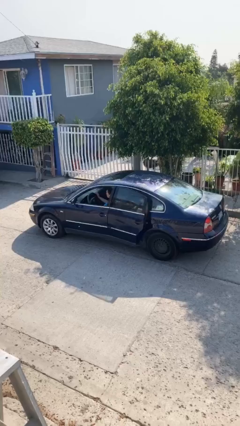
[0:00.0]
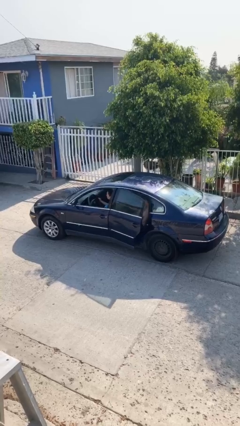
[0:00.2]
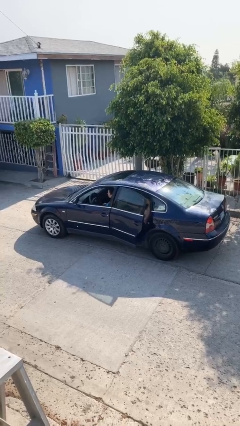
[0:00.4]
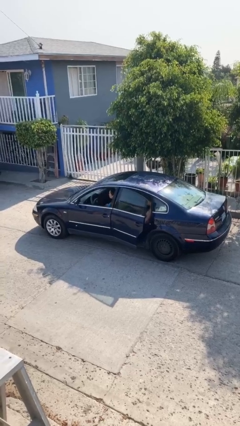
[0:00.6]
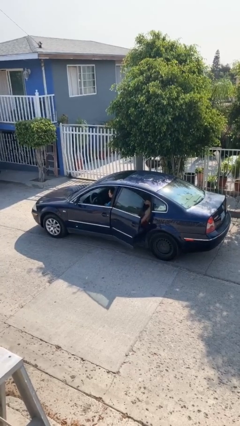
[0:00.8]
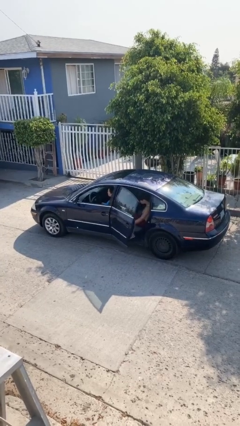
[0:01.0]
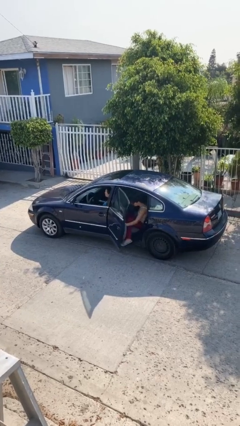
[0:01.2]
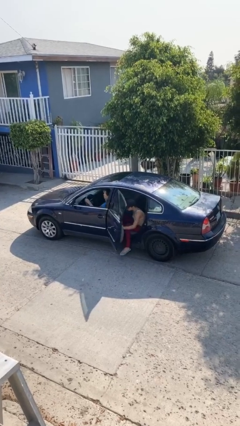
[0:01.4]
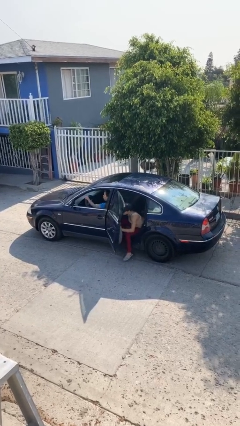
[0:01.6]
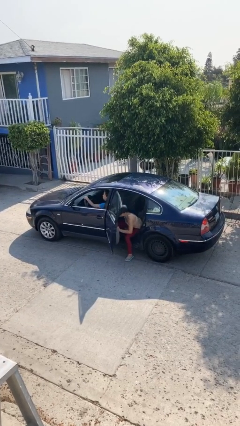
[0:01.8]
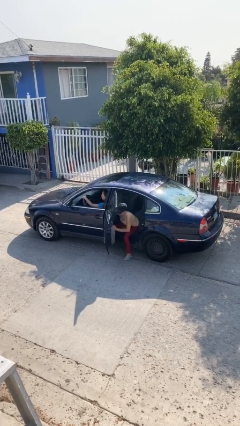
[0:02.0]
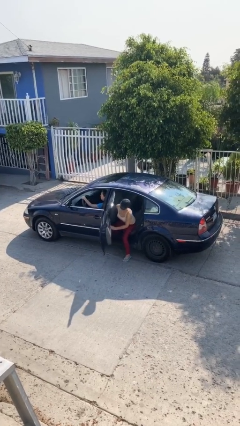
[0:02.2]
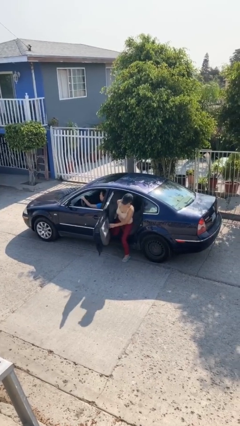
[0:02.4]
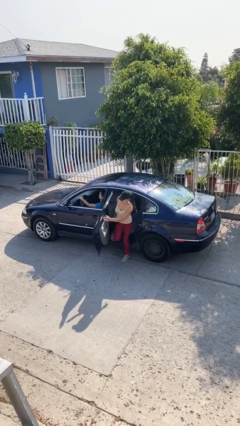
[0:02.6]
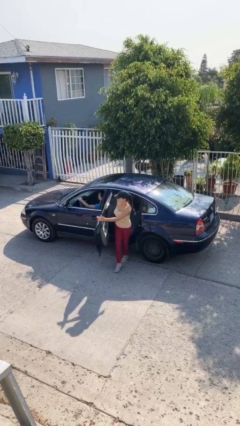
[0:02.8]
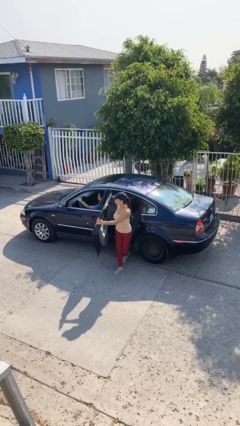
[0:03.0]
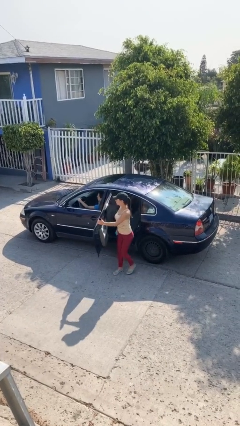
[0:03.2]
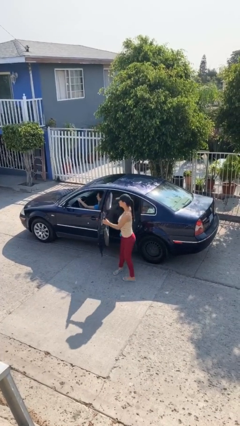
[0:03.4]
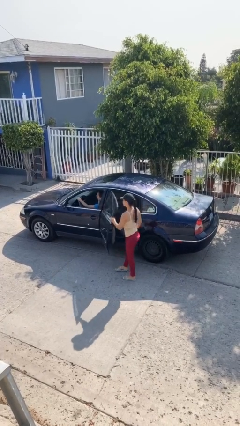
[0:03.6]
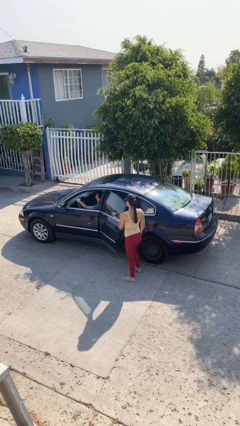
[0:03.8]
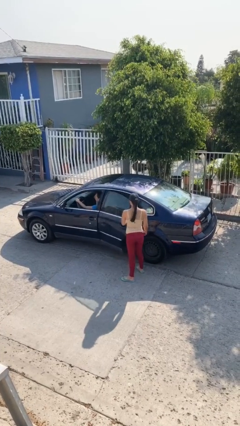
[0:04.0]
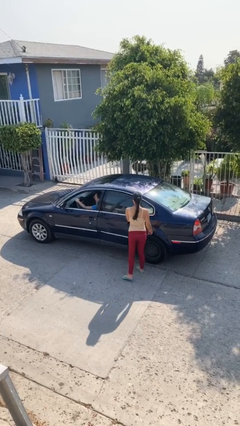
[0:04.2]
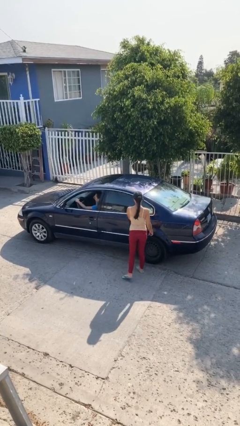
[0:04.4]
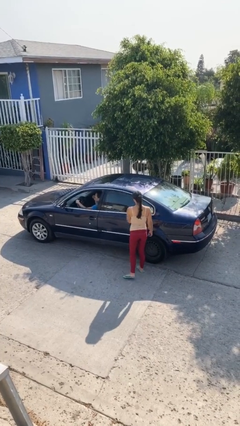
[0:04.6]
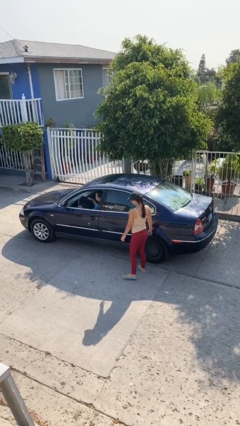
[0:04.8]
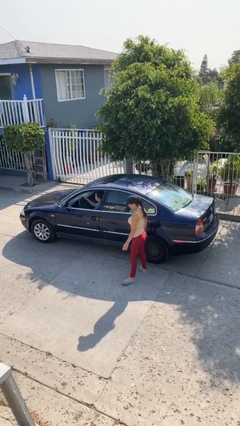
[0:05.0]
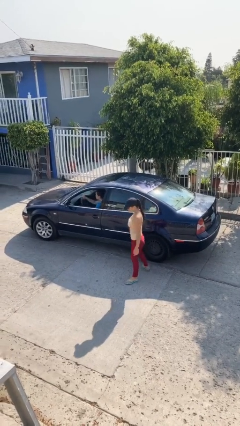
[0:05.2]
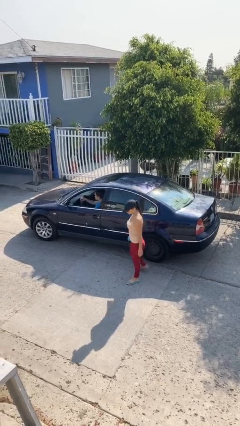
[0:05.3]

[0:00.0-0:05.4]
car drops off person

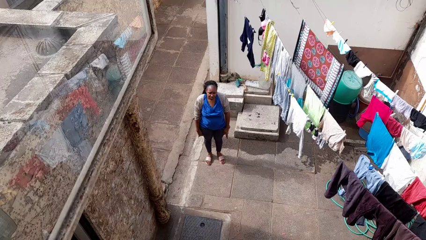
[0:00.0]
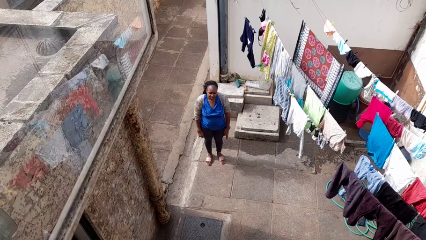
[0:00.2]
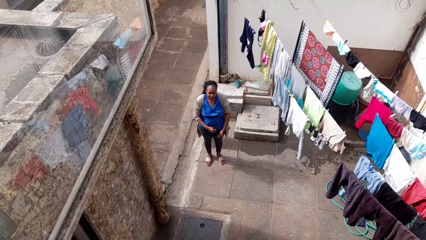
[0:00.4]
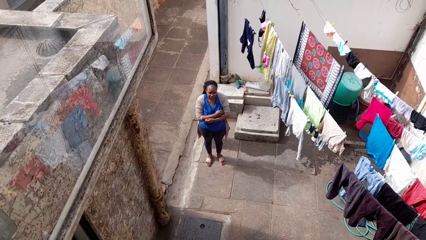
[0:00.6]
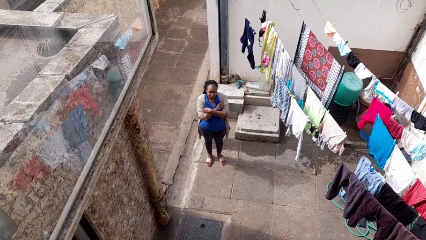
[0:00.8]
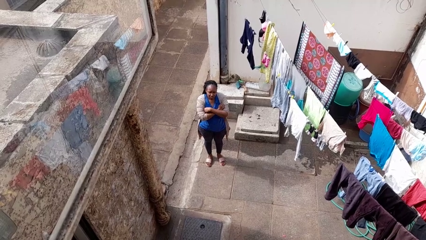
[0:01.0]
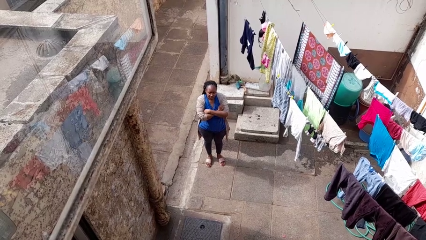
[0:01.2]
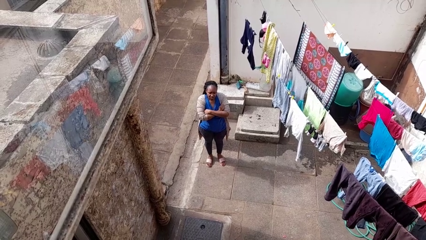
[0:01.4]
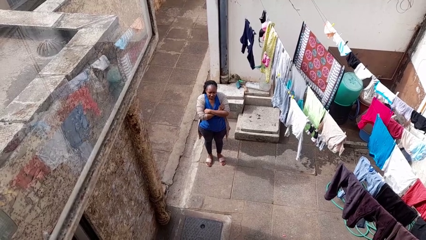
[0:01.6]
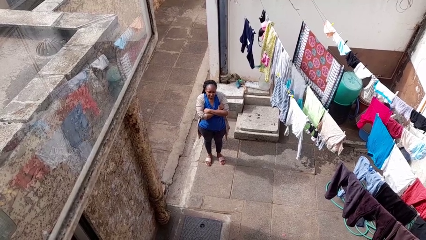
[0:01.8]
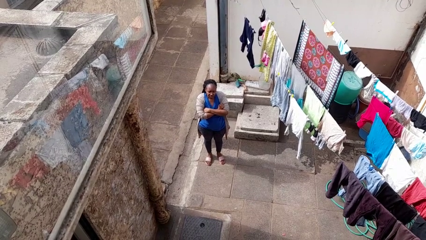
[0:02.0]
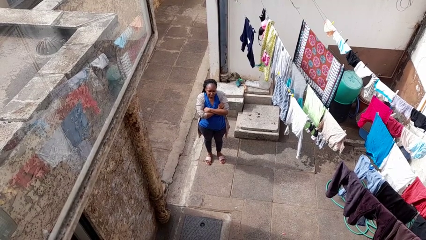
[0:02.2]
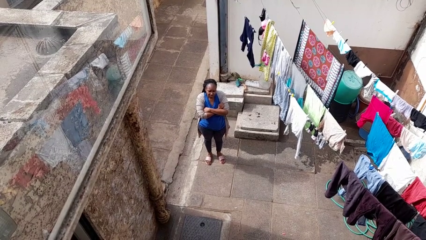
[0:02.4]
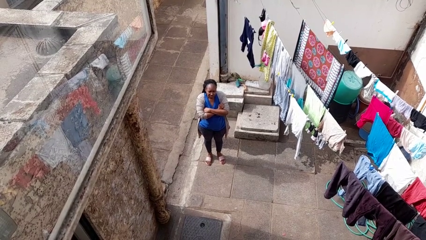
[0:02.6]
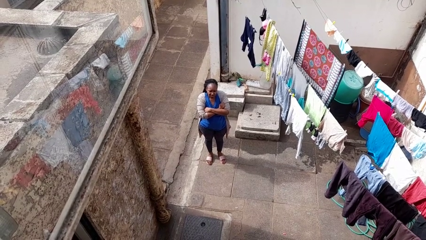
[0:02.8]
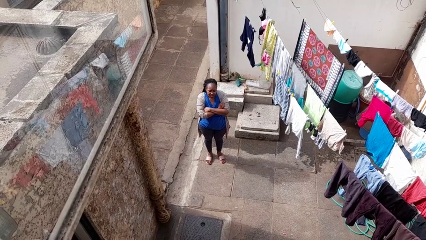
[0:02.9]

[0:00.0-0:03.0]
person gestures arms x

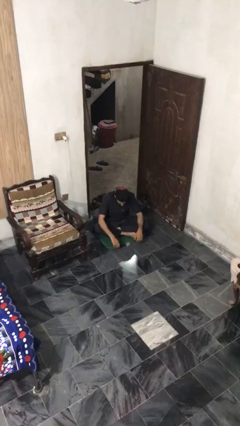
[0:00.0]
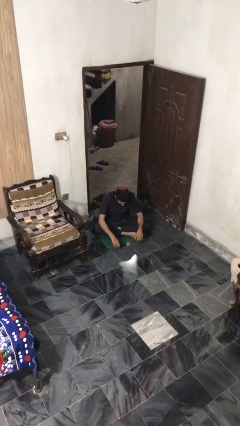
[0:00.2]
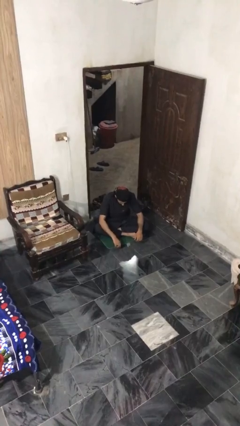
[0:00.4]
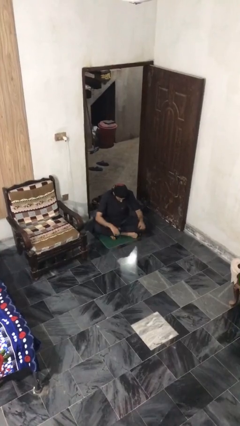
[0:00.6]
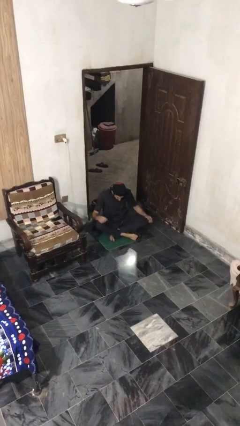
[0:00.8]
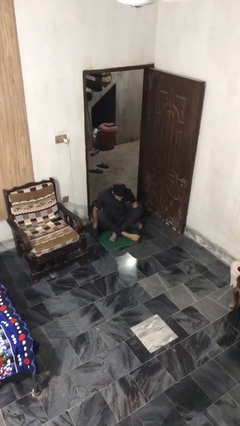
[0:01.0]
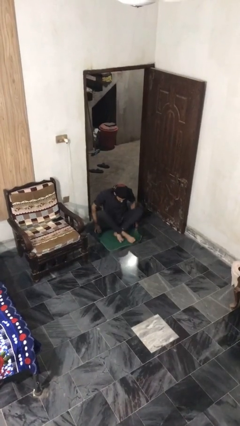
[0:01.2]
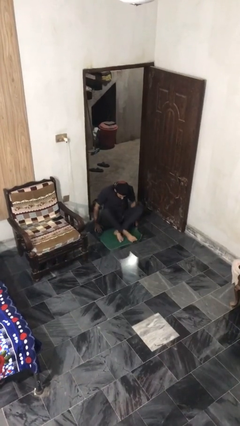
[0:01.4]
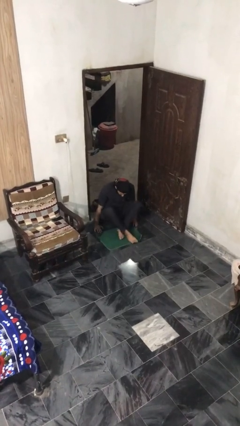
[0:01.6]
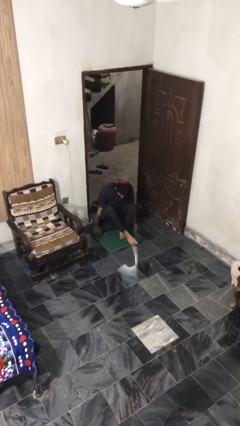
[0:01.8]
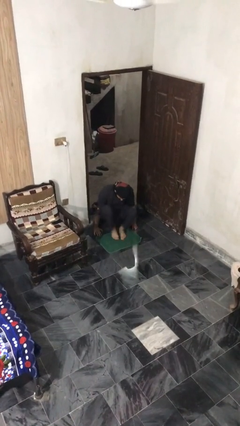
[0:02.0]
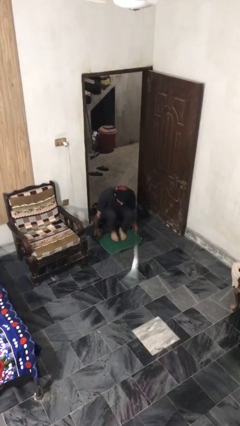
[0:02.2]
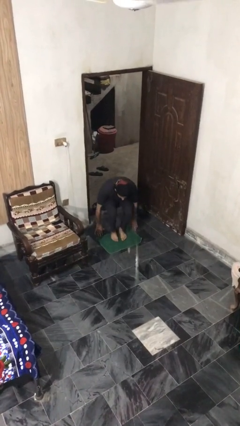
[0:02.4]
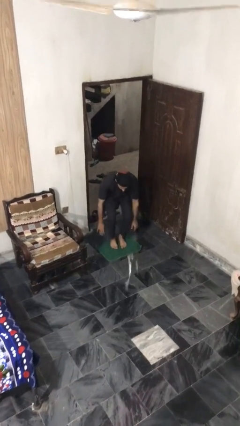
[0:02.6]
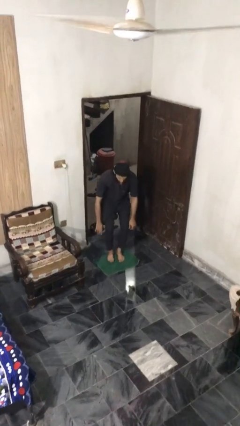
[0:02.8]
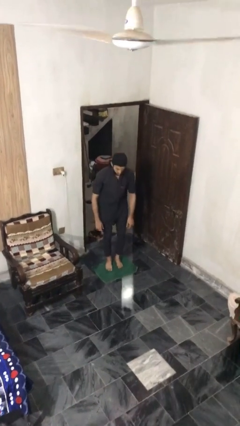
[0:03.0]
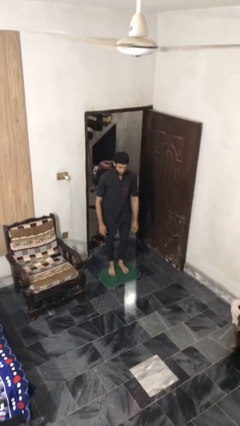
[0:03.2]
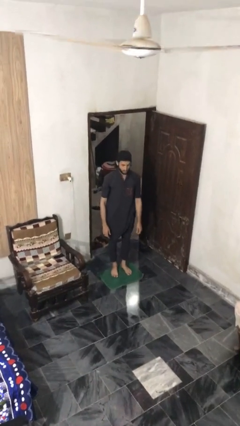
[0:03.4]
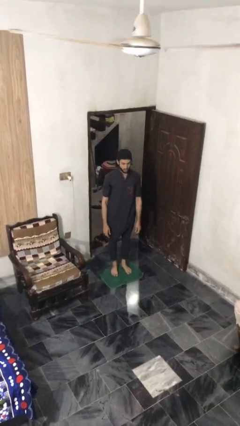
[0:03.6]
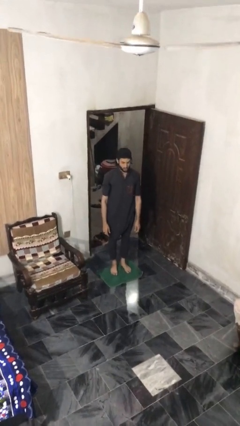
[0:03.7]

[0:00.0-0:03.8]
person stands up from floor

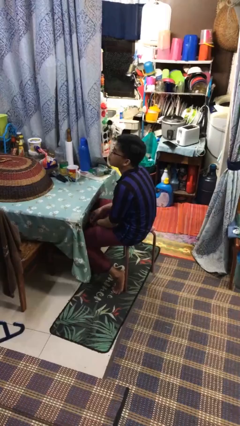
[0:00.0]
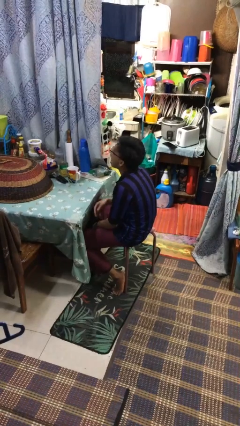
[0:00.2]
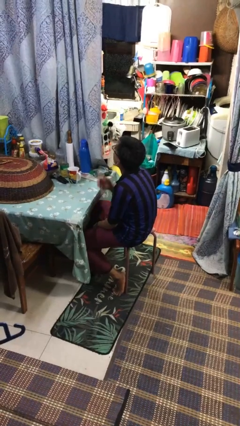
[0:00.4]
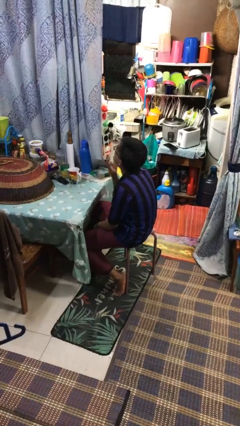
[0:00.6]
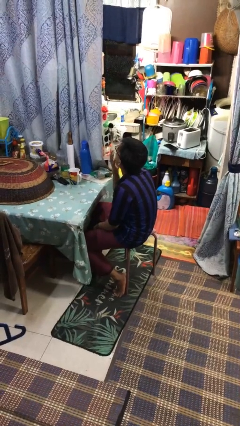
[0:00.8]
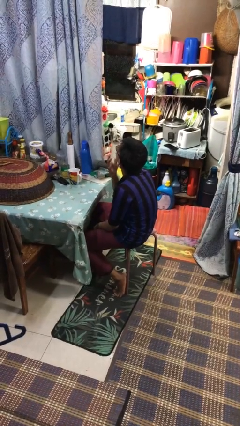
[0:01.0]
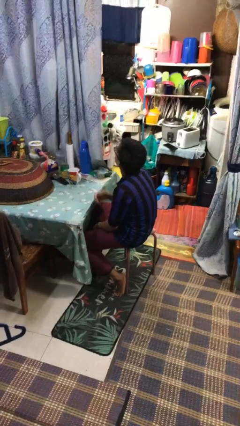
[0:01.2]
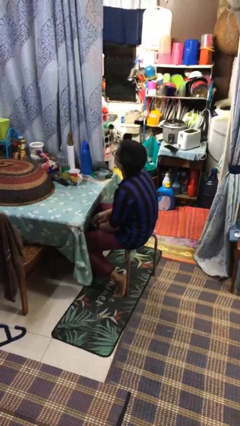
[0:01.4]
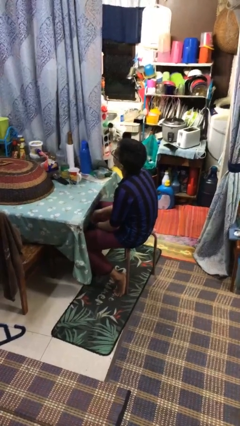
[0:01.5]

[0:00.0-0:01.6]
person yawns

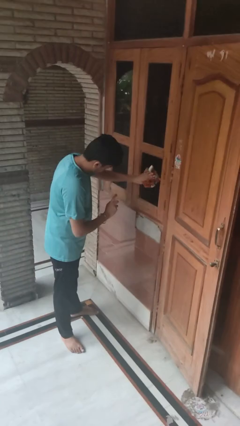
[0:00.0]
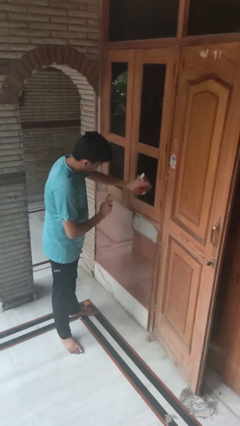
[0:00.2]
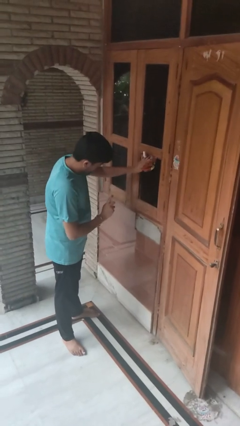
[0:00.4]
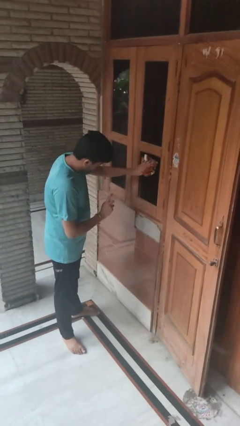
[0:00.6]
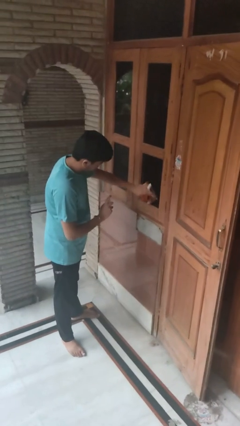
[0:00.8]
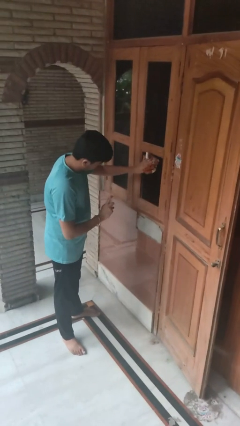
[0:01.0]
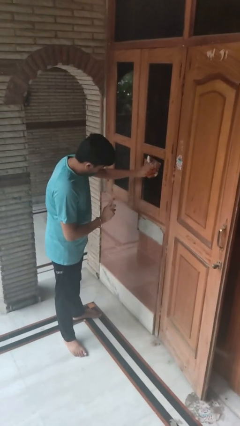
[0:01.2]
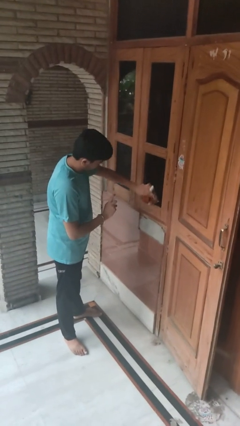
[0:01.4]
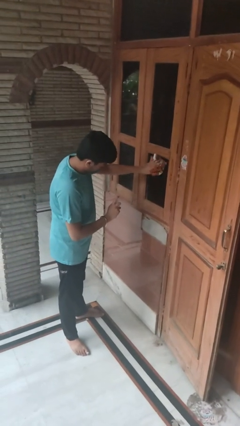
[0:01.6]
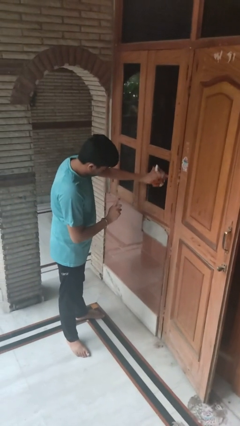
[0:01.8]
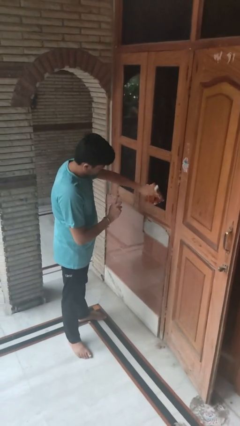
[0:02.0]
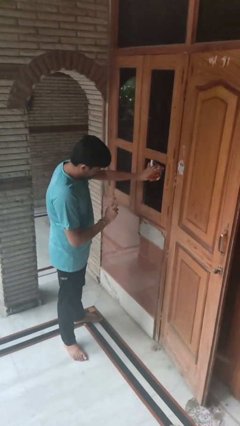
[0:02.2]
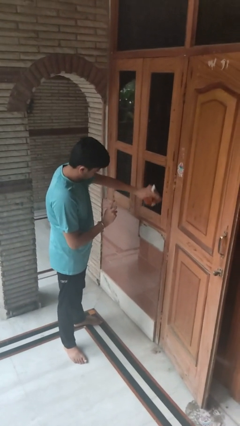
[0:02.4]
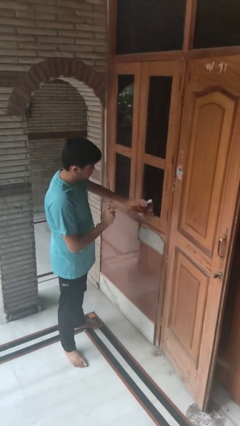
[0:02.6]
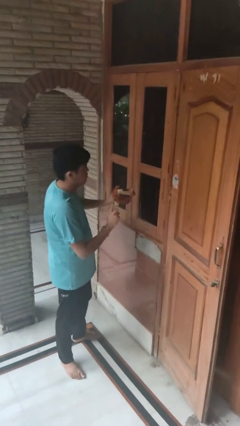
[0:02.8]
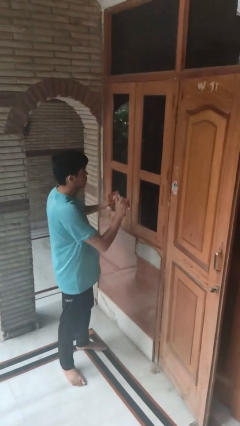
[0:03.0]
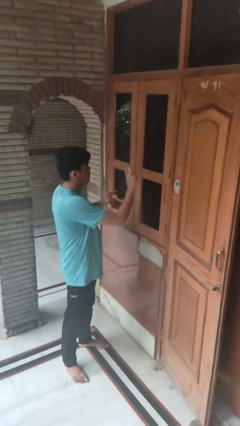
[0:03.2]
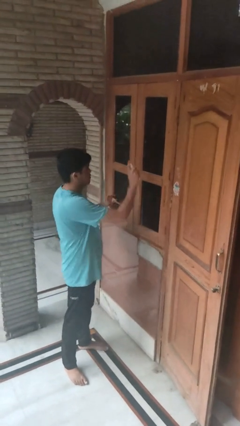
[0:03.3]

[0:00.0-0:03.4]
person washes window

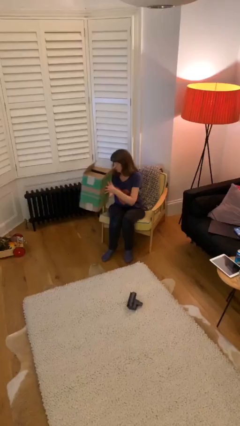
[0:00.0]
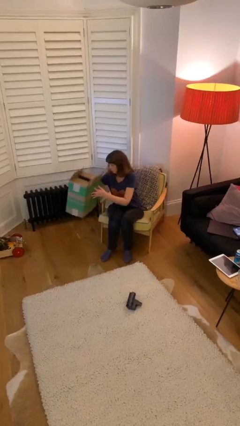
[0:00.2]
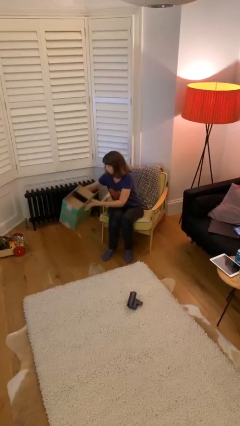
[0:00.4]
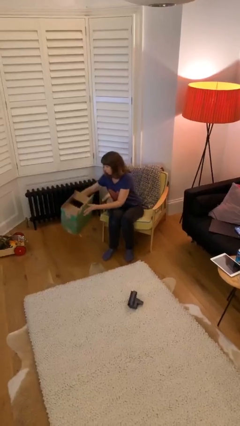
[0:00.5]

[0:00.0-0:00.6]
person puts down object on floor
